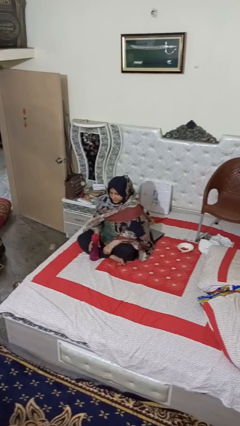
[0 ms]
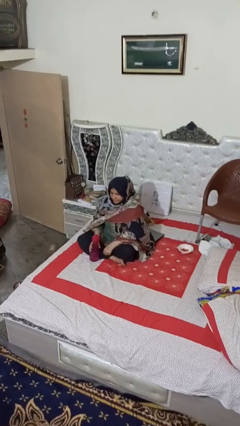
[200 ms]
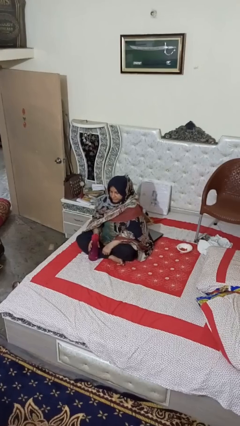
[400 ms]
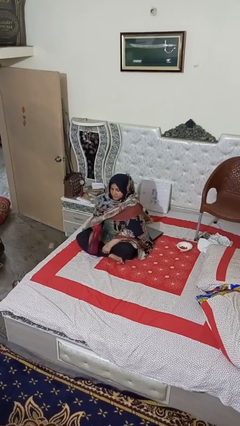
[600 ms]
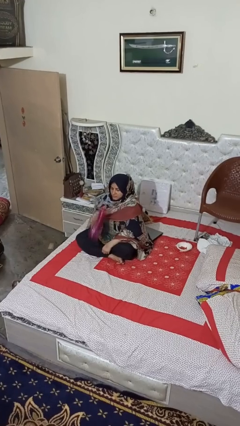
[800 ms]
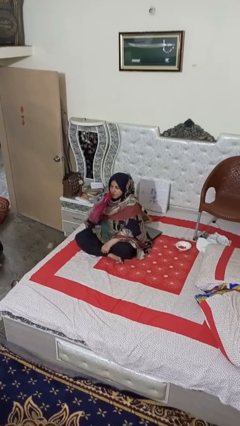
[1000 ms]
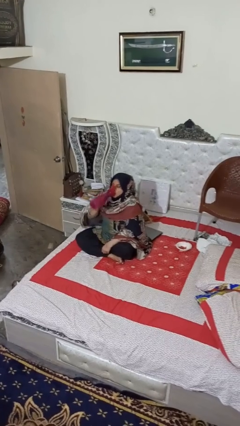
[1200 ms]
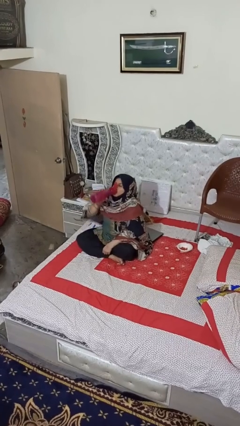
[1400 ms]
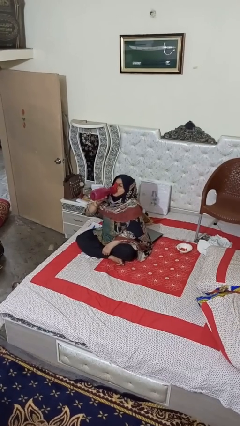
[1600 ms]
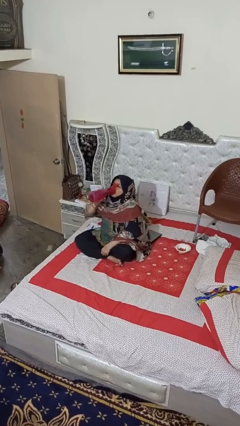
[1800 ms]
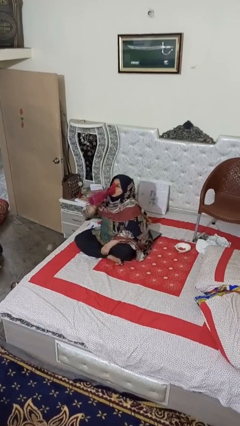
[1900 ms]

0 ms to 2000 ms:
person drinks from bottle

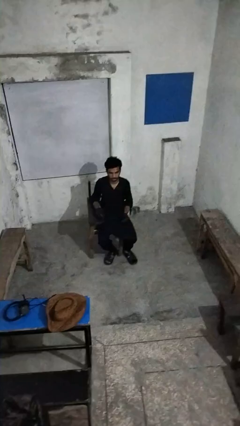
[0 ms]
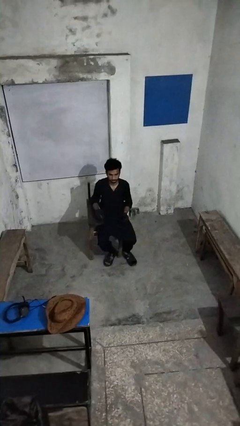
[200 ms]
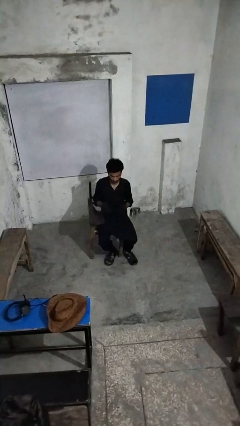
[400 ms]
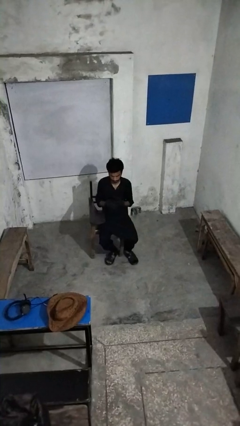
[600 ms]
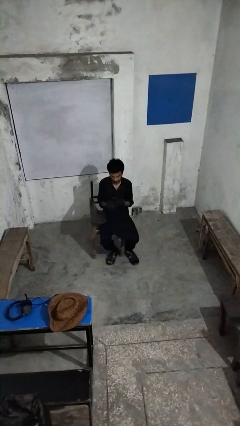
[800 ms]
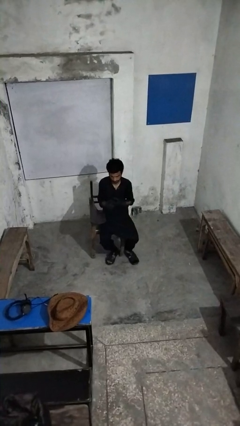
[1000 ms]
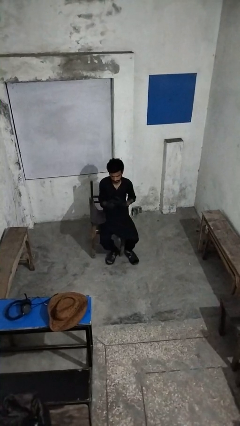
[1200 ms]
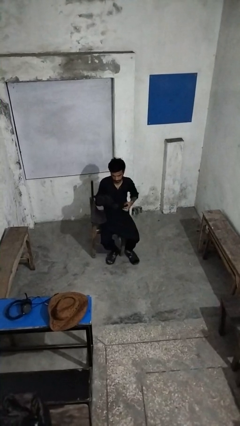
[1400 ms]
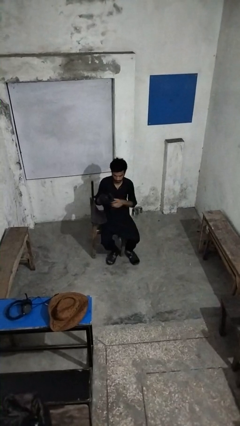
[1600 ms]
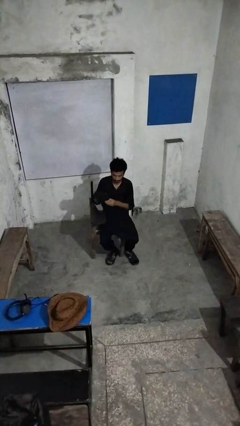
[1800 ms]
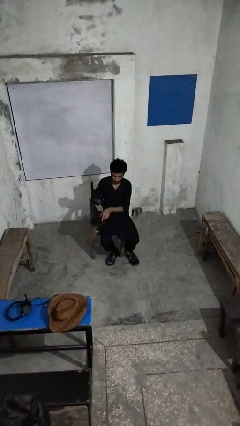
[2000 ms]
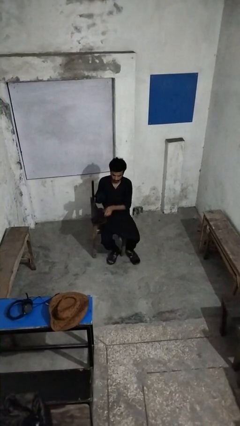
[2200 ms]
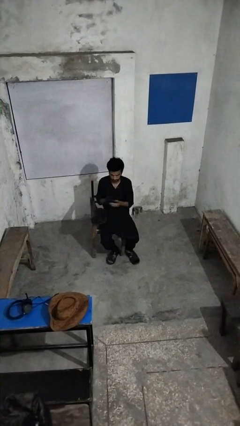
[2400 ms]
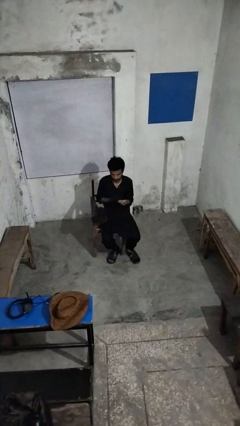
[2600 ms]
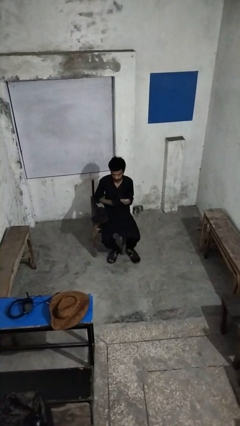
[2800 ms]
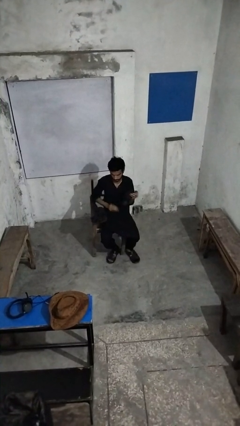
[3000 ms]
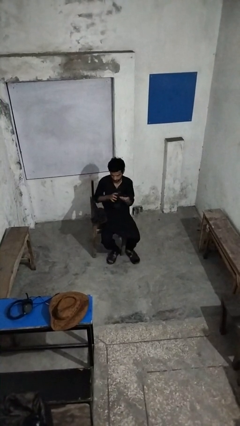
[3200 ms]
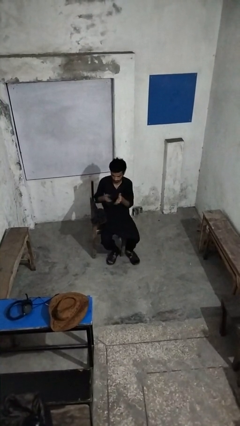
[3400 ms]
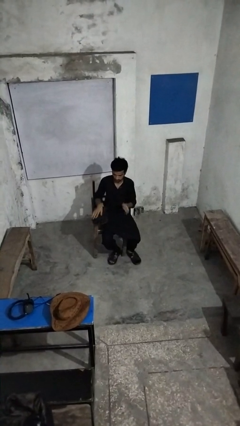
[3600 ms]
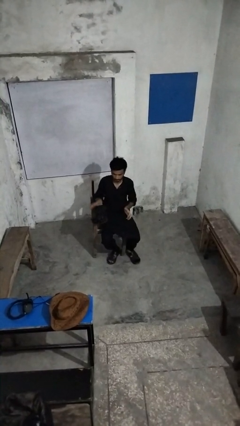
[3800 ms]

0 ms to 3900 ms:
person takes off gloves

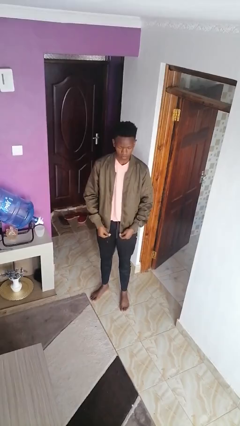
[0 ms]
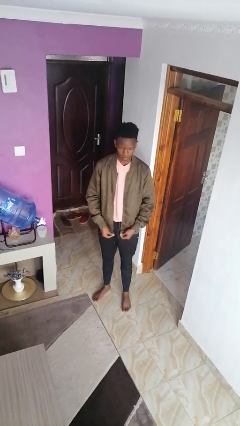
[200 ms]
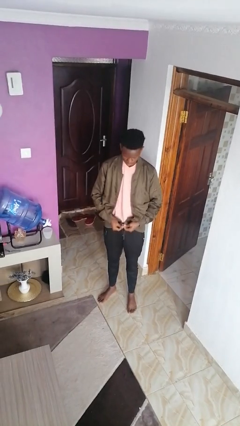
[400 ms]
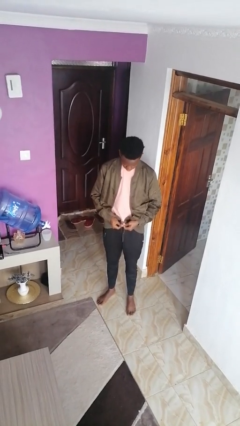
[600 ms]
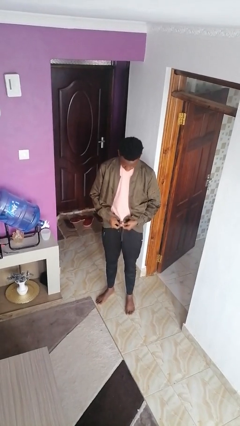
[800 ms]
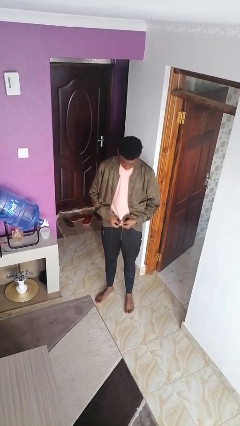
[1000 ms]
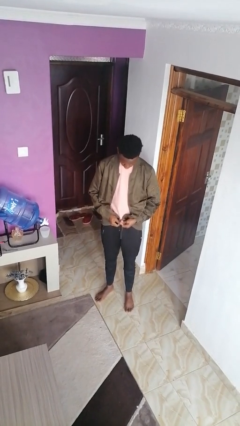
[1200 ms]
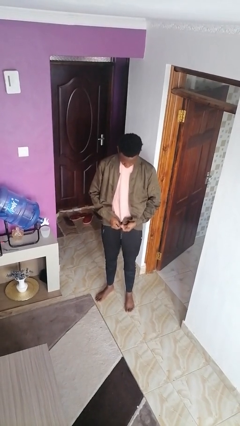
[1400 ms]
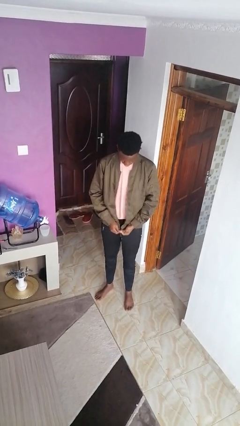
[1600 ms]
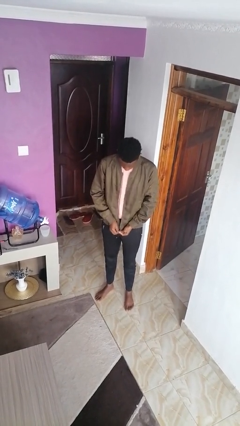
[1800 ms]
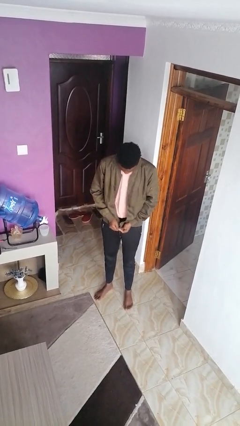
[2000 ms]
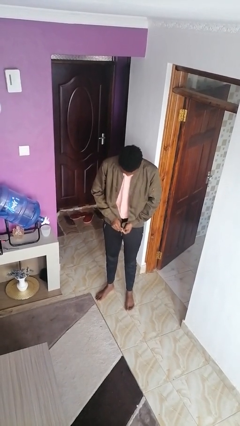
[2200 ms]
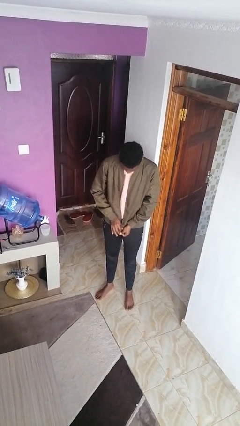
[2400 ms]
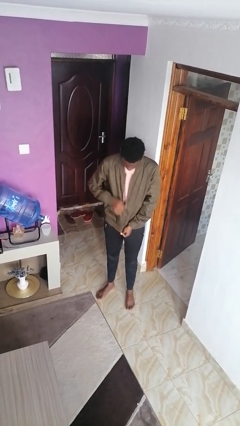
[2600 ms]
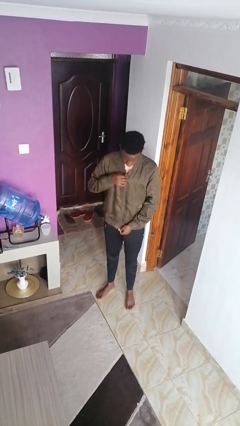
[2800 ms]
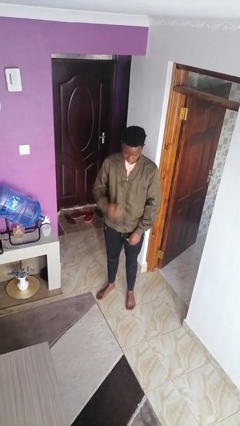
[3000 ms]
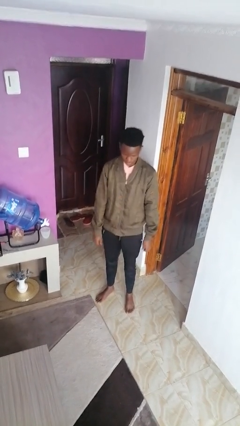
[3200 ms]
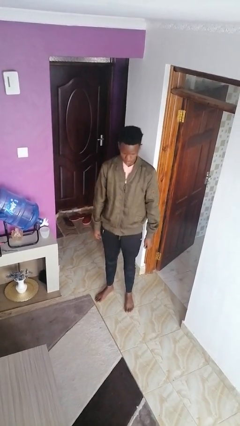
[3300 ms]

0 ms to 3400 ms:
person zips up jacket

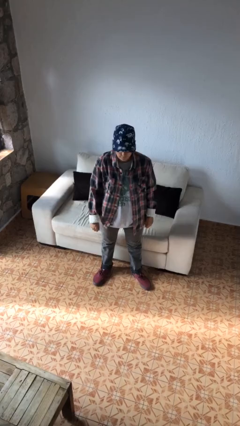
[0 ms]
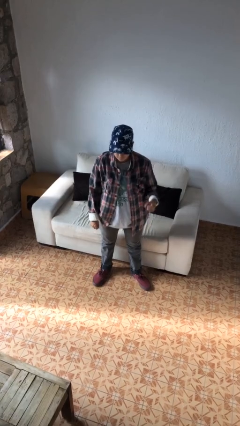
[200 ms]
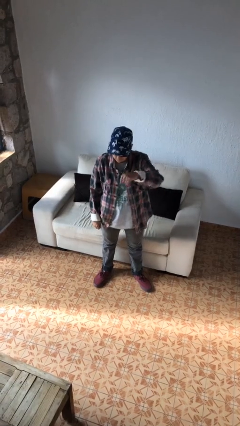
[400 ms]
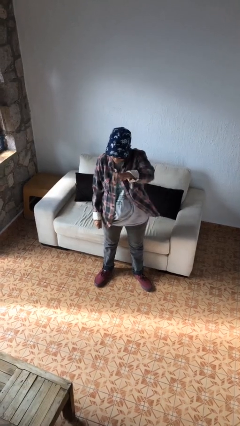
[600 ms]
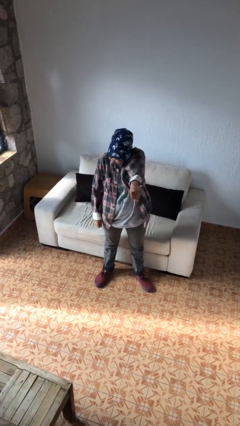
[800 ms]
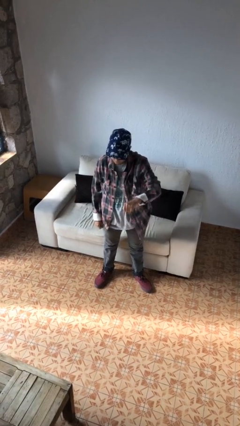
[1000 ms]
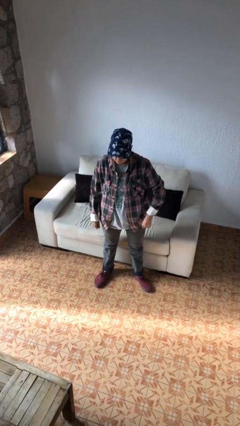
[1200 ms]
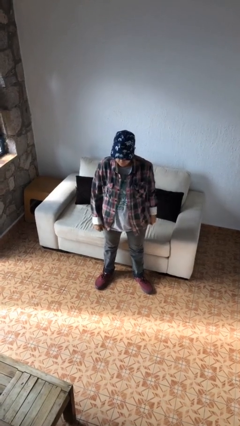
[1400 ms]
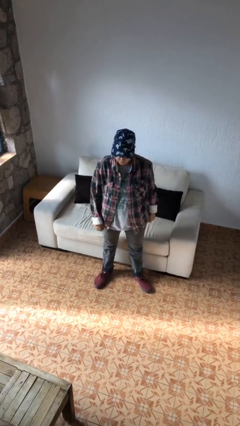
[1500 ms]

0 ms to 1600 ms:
person punches

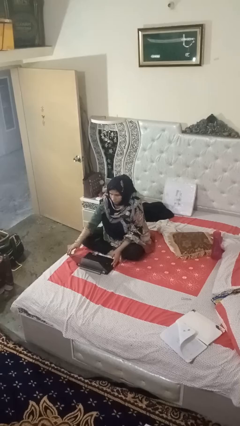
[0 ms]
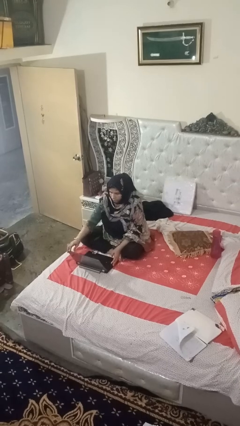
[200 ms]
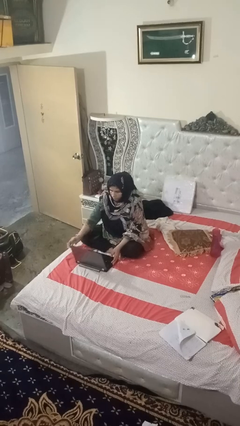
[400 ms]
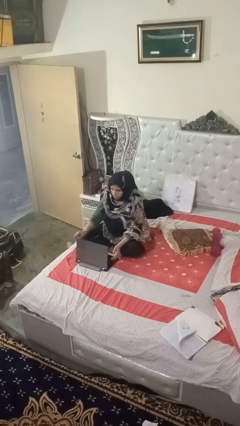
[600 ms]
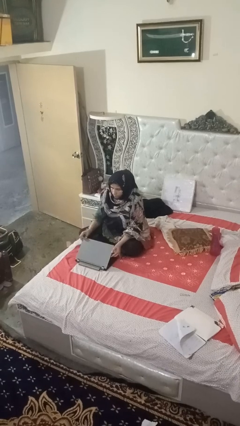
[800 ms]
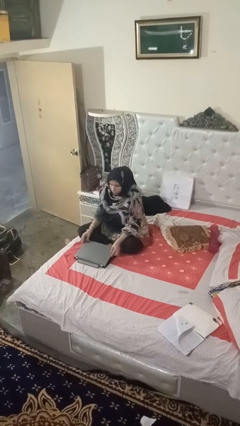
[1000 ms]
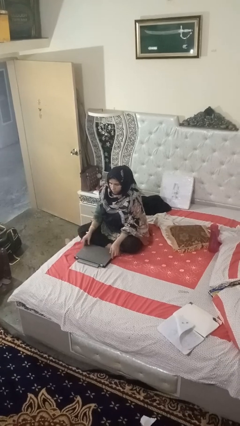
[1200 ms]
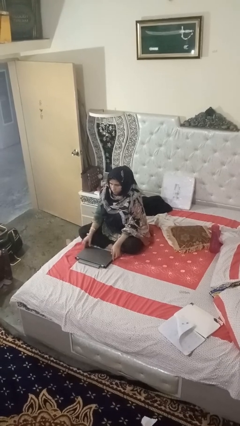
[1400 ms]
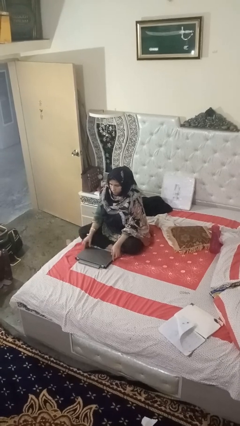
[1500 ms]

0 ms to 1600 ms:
person closes laptop

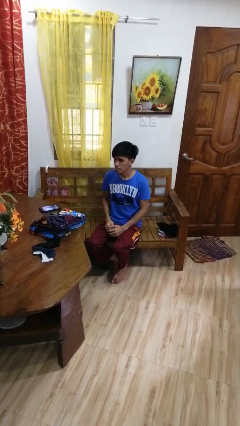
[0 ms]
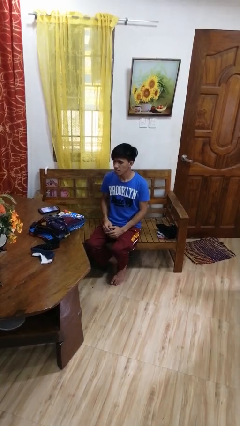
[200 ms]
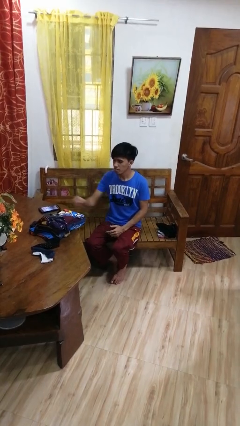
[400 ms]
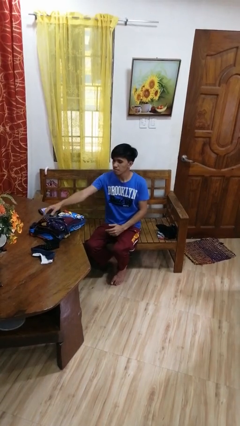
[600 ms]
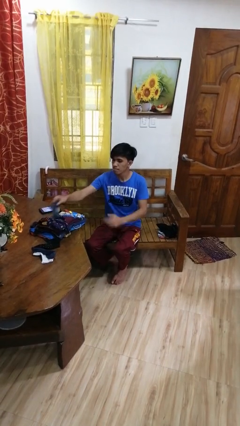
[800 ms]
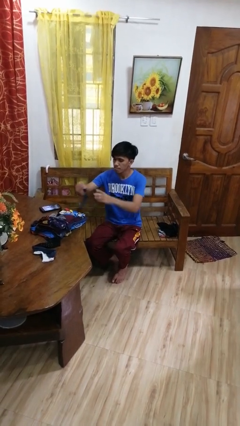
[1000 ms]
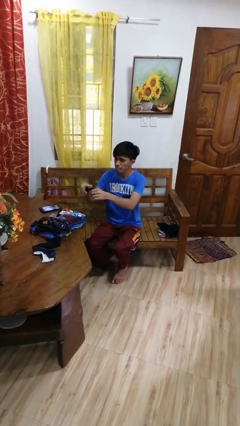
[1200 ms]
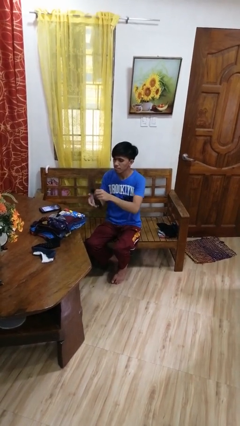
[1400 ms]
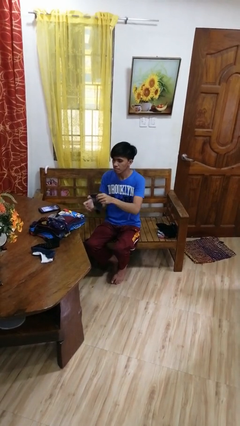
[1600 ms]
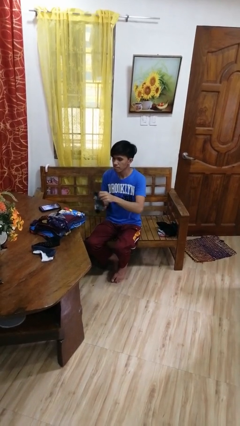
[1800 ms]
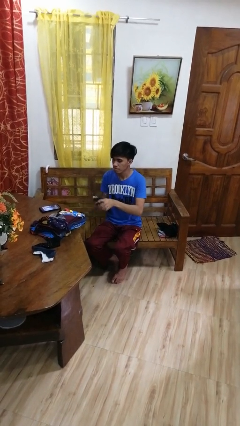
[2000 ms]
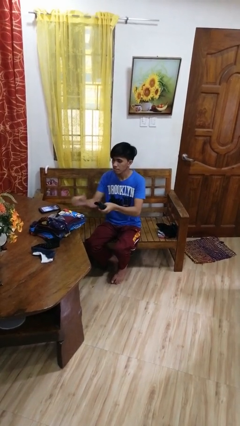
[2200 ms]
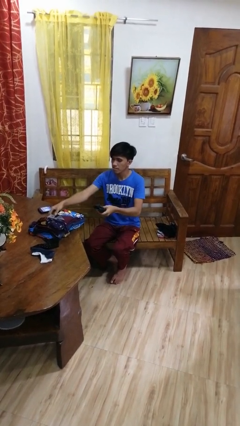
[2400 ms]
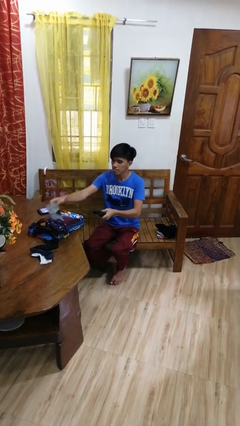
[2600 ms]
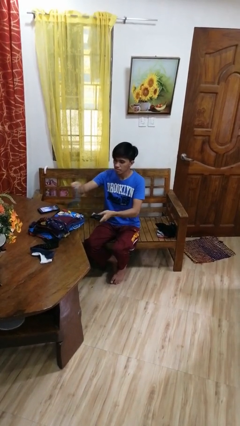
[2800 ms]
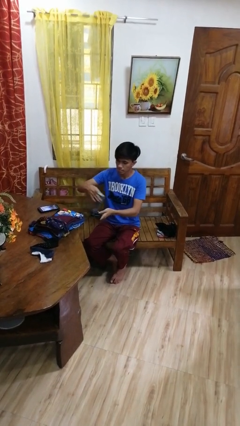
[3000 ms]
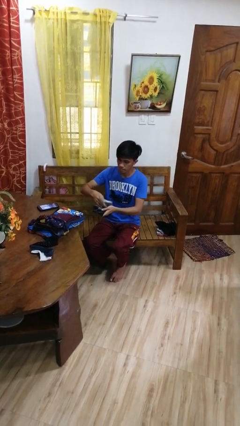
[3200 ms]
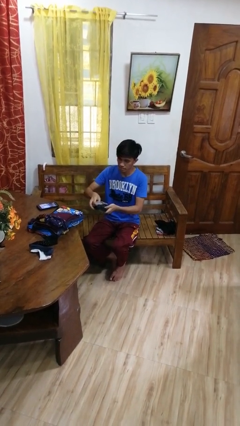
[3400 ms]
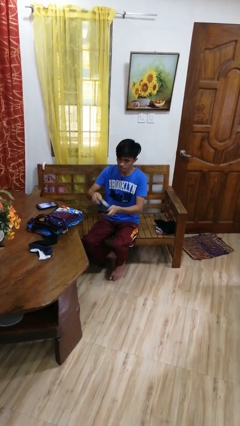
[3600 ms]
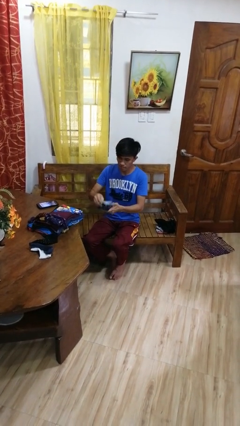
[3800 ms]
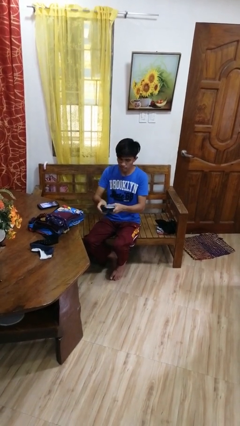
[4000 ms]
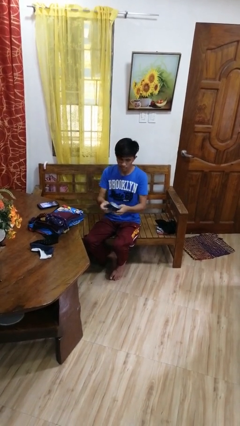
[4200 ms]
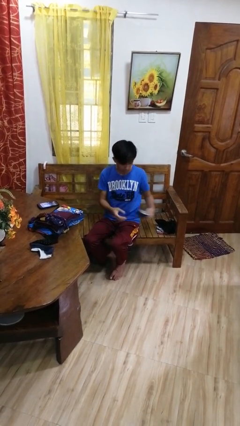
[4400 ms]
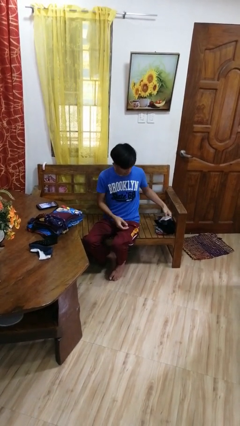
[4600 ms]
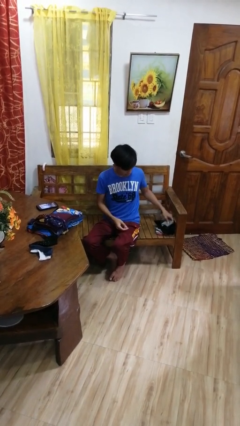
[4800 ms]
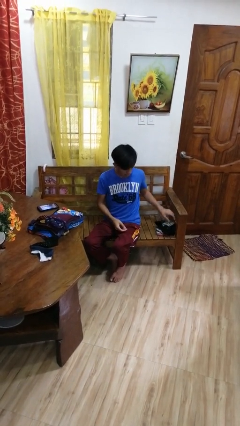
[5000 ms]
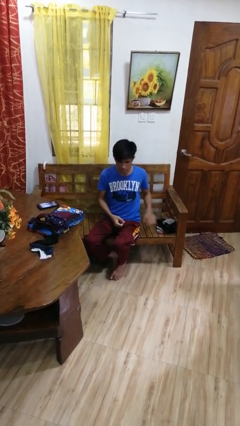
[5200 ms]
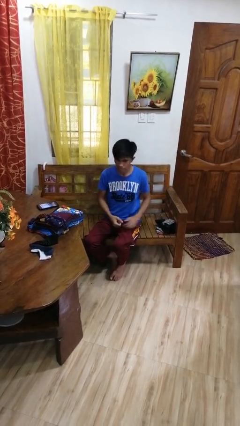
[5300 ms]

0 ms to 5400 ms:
person folds socks
